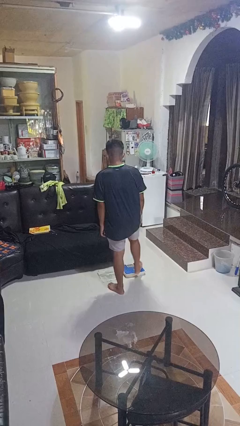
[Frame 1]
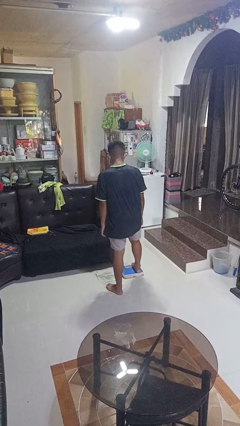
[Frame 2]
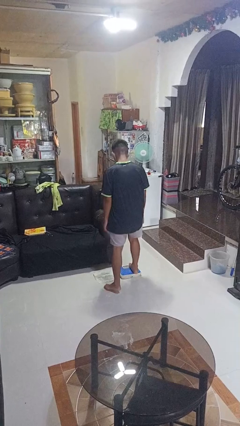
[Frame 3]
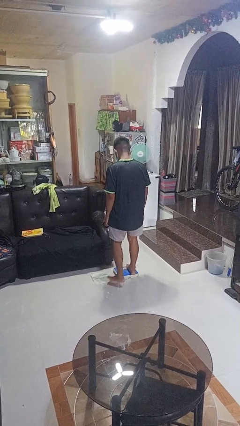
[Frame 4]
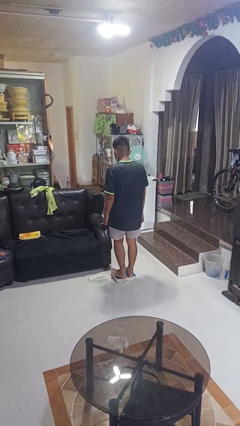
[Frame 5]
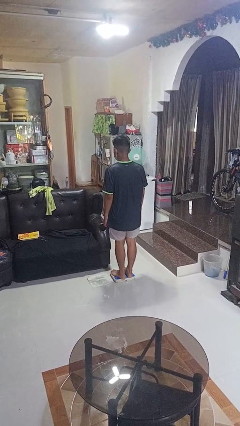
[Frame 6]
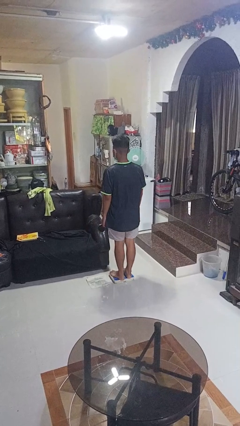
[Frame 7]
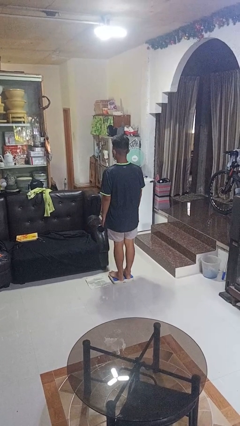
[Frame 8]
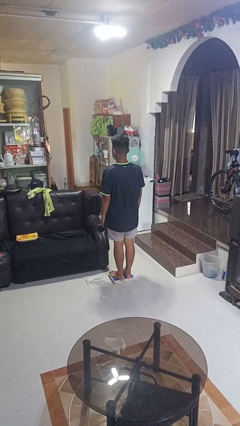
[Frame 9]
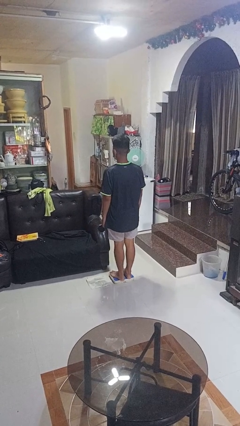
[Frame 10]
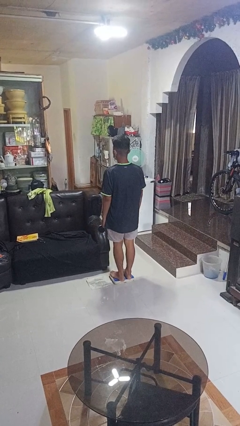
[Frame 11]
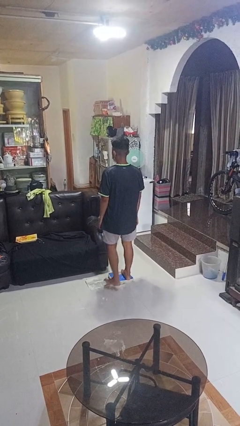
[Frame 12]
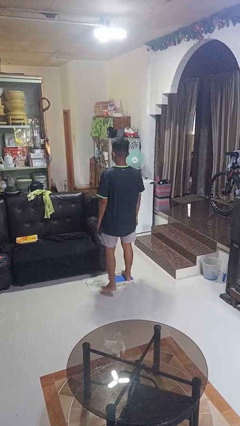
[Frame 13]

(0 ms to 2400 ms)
person uses bodyweight scale

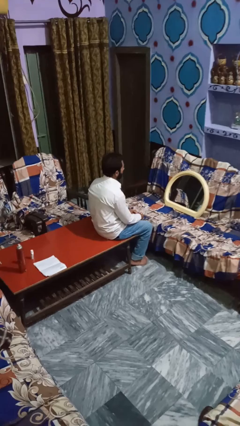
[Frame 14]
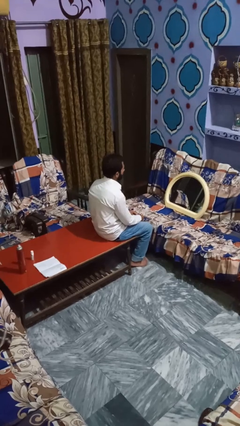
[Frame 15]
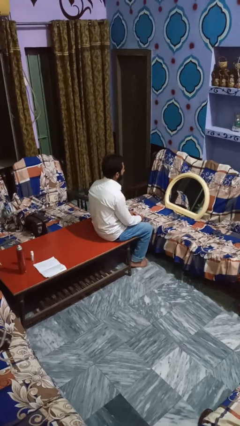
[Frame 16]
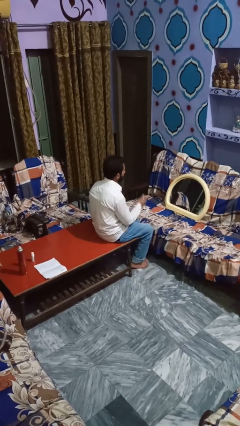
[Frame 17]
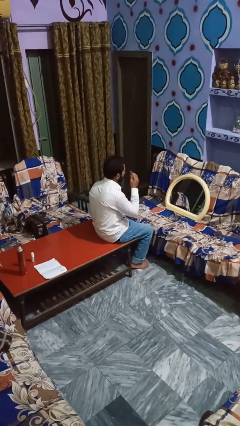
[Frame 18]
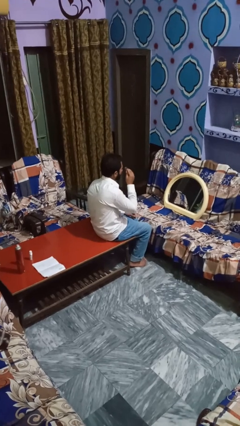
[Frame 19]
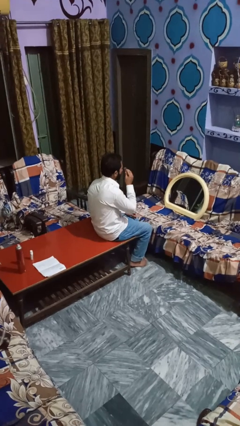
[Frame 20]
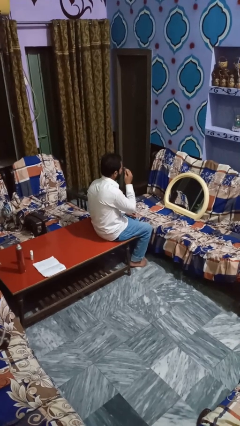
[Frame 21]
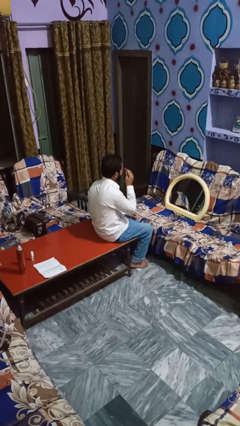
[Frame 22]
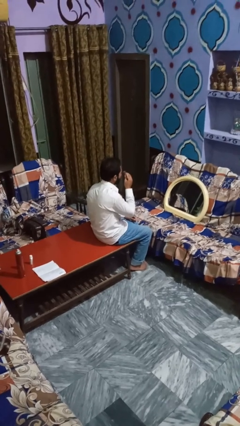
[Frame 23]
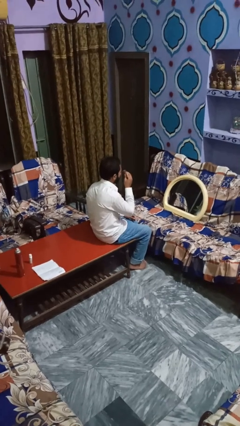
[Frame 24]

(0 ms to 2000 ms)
person applies eye makeup

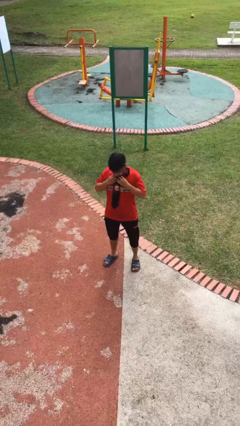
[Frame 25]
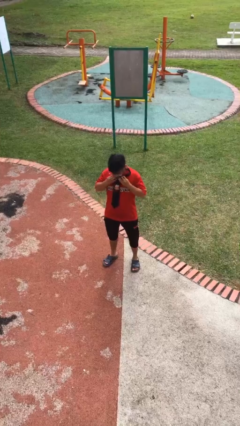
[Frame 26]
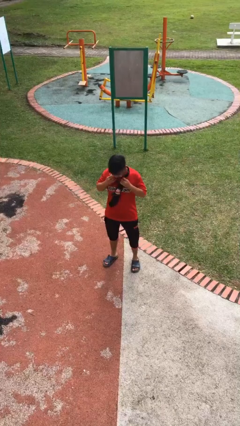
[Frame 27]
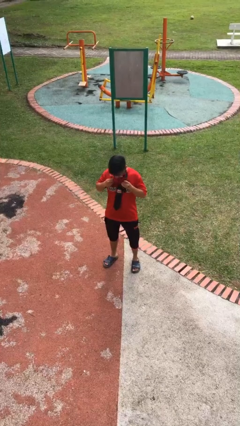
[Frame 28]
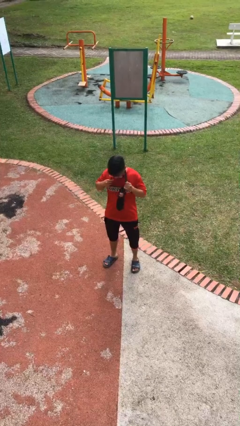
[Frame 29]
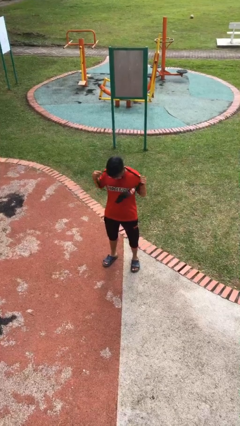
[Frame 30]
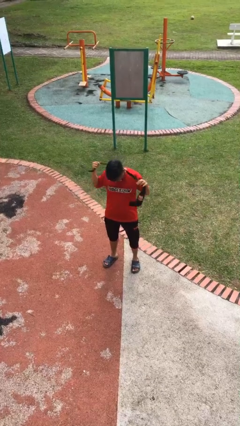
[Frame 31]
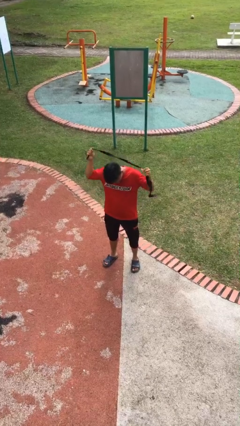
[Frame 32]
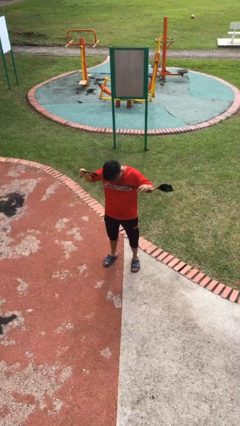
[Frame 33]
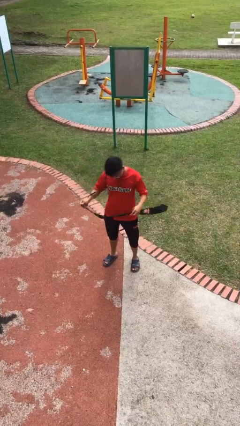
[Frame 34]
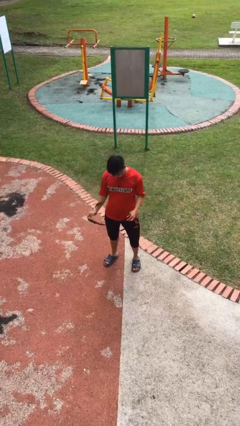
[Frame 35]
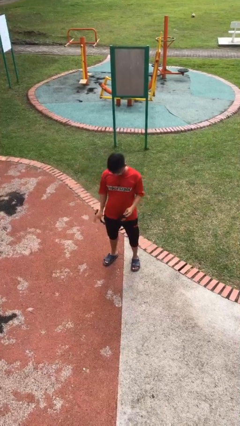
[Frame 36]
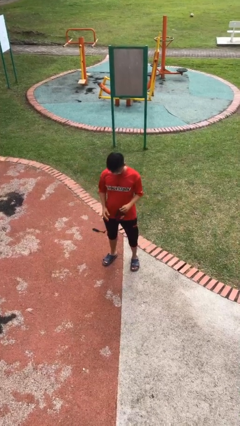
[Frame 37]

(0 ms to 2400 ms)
person takes off necktie

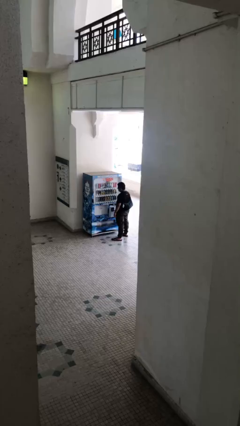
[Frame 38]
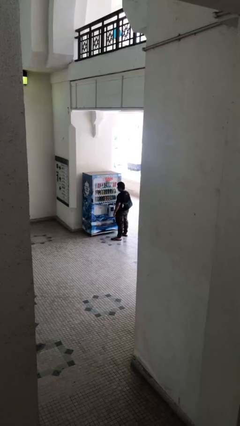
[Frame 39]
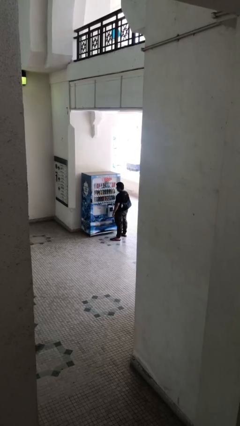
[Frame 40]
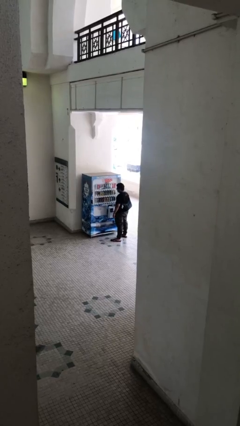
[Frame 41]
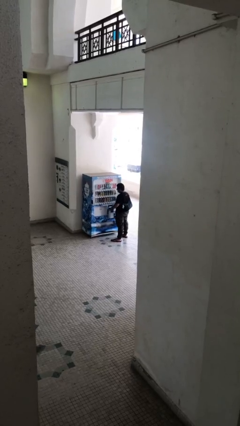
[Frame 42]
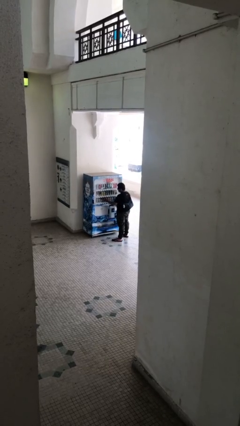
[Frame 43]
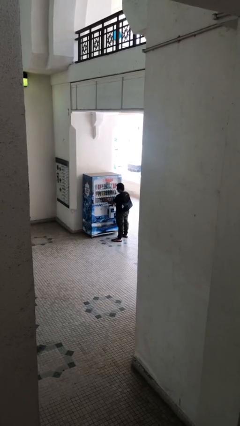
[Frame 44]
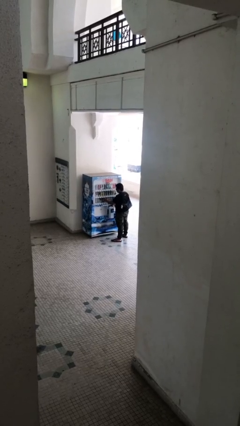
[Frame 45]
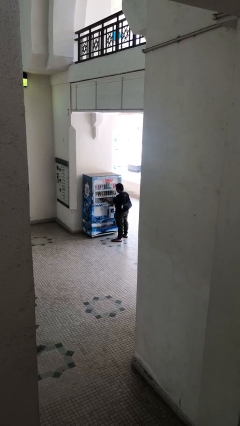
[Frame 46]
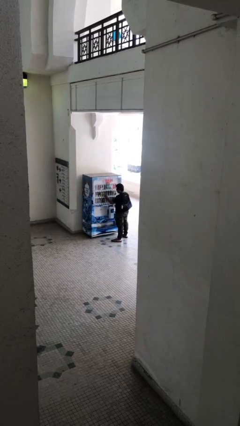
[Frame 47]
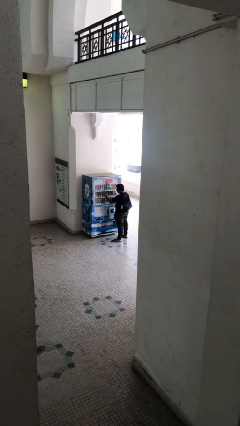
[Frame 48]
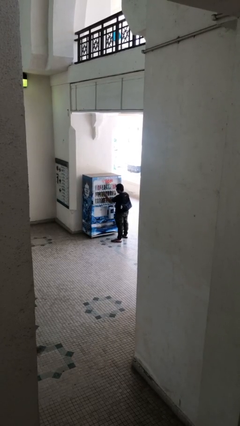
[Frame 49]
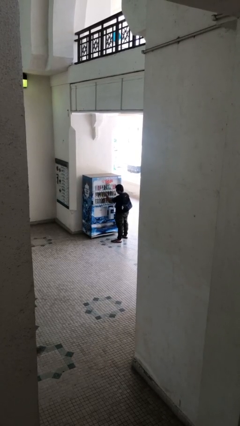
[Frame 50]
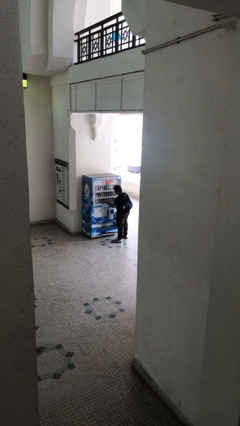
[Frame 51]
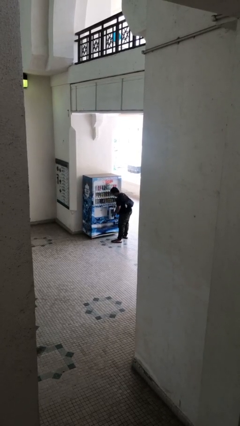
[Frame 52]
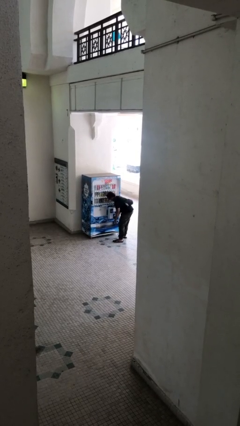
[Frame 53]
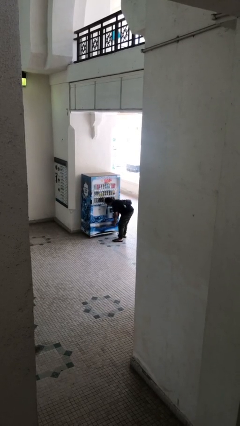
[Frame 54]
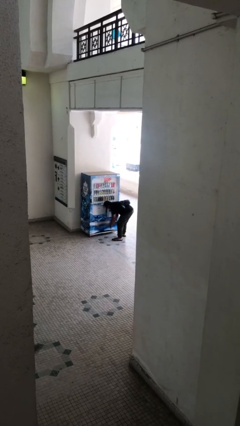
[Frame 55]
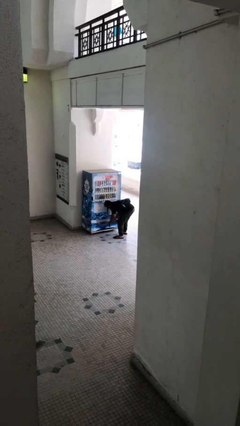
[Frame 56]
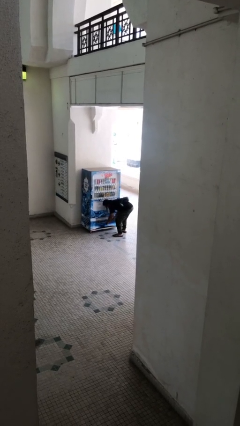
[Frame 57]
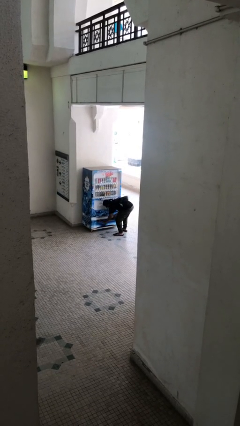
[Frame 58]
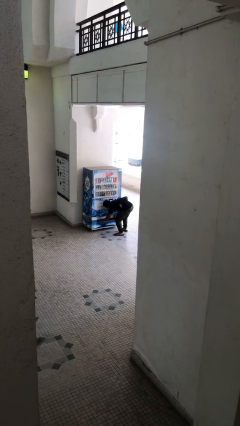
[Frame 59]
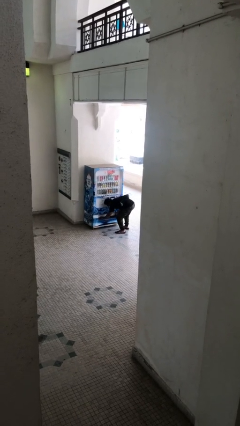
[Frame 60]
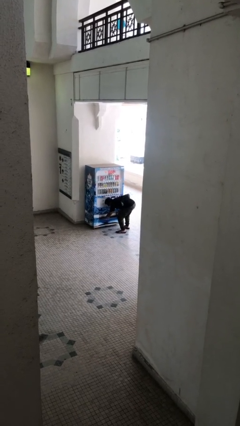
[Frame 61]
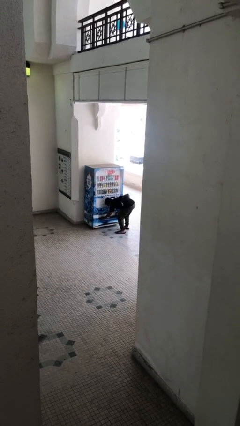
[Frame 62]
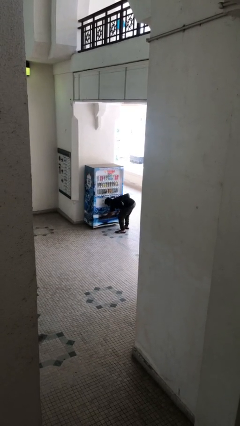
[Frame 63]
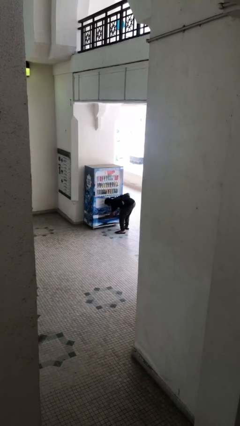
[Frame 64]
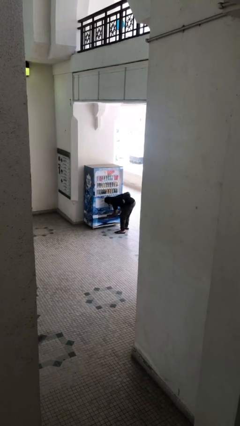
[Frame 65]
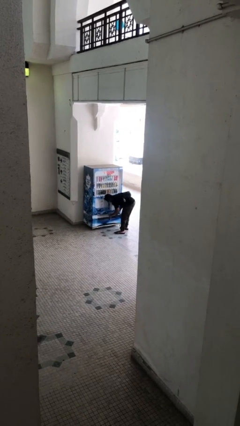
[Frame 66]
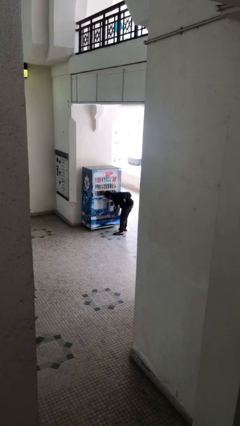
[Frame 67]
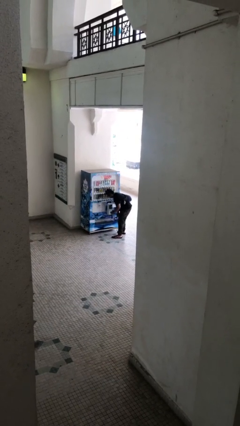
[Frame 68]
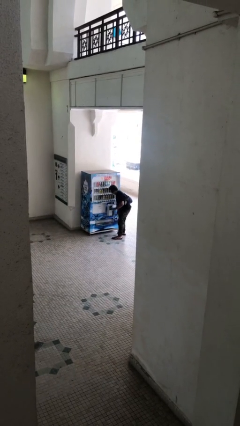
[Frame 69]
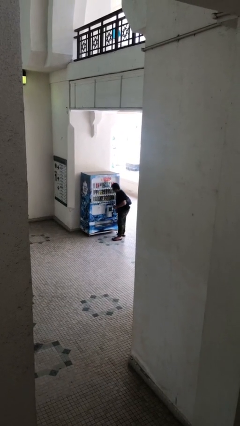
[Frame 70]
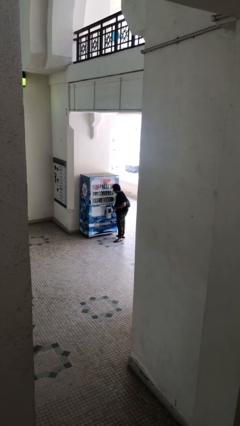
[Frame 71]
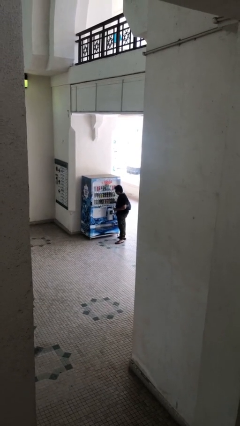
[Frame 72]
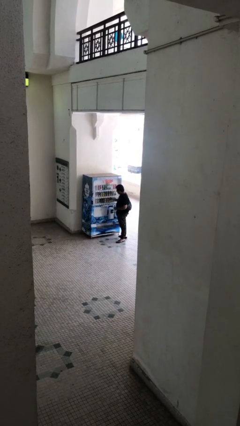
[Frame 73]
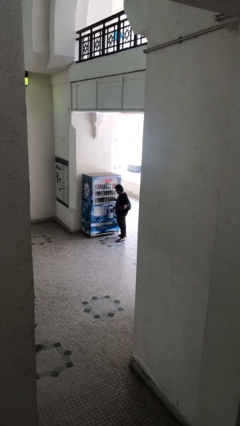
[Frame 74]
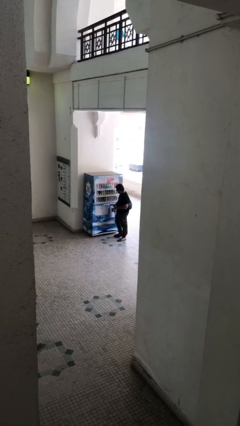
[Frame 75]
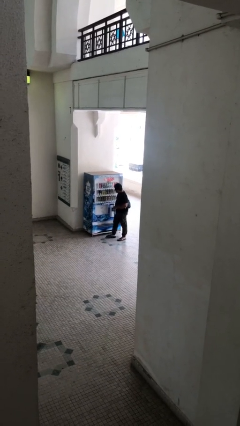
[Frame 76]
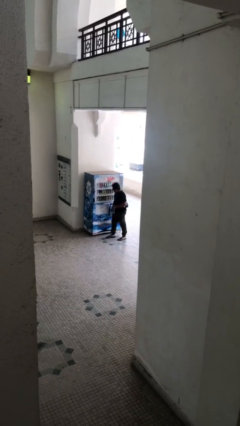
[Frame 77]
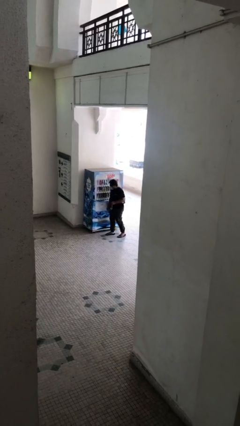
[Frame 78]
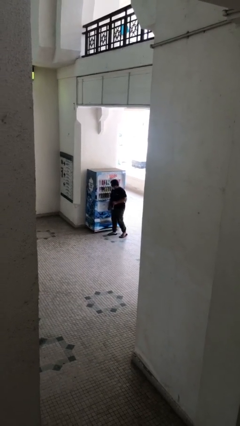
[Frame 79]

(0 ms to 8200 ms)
person purchases from machine

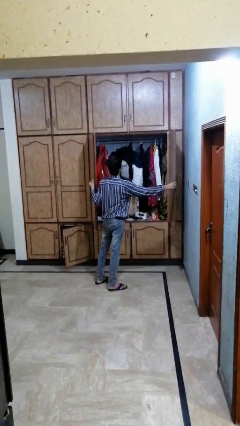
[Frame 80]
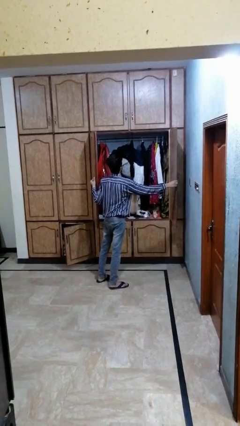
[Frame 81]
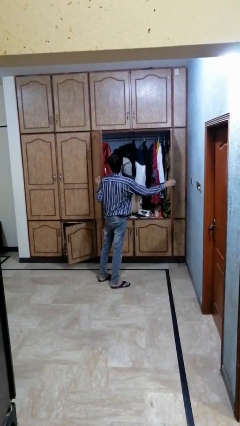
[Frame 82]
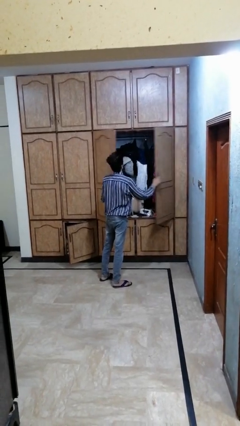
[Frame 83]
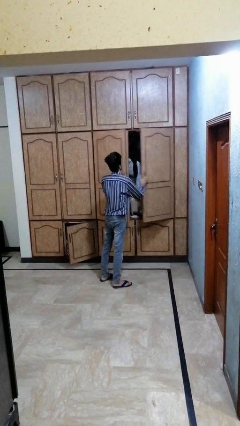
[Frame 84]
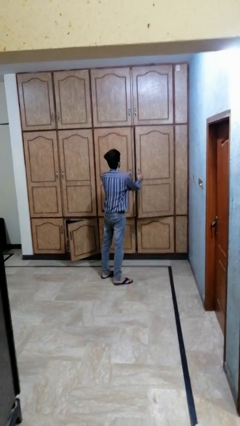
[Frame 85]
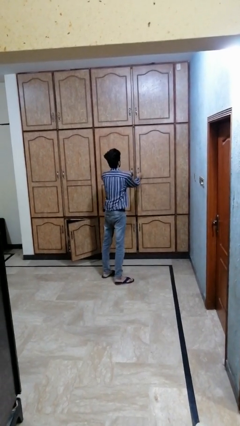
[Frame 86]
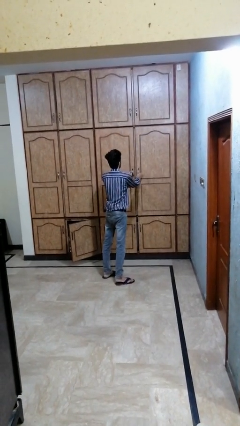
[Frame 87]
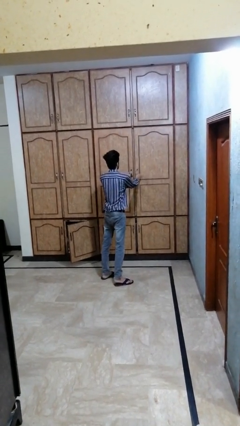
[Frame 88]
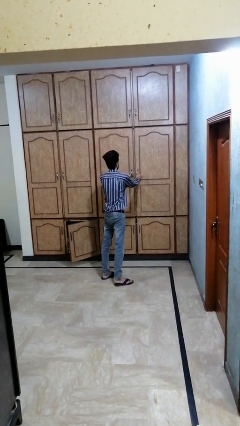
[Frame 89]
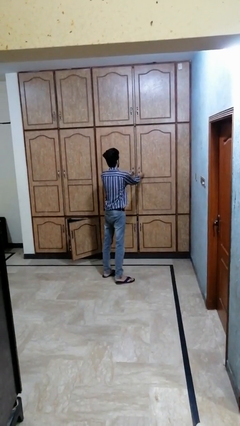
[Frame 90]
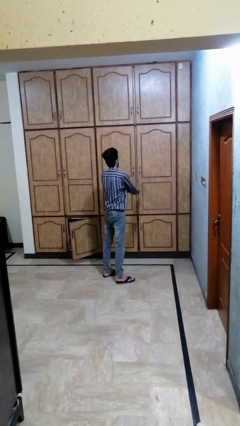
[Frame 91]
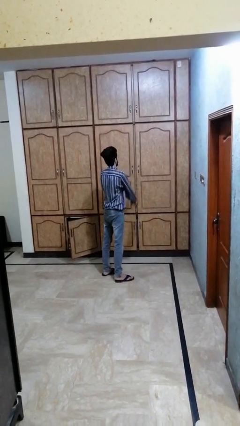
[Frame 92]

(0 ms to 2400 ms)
person closes dresser drawer
